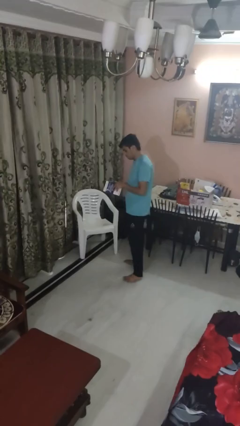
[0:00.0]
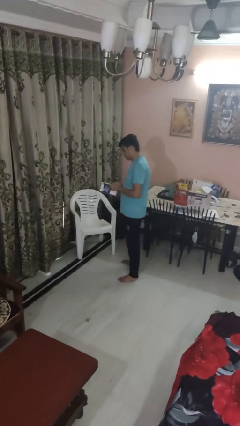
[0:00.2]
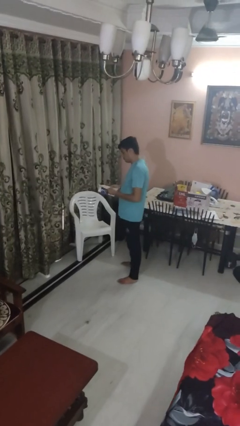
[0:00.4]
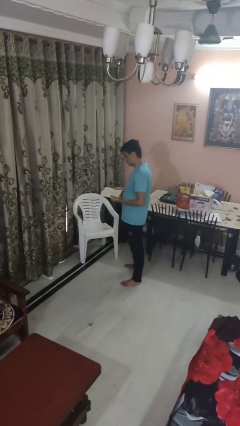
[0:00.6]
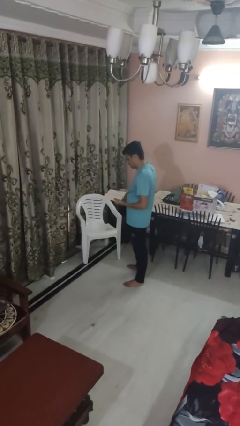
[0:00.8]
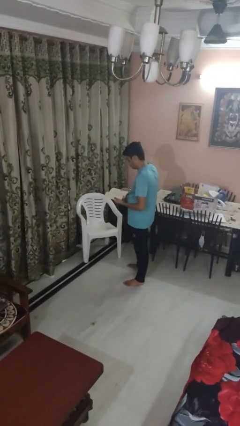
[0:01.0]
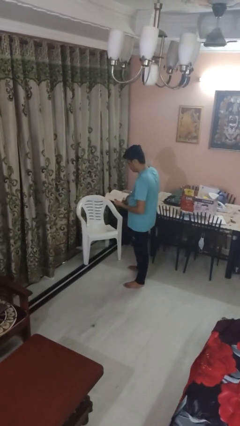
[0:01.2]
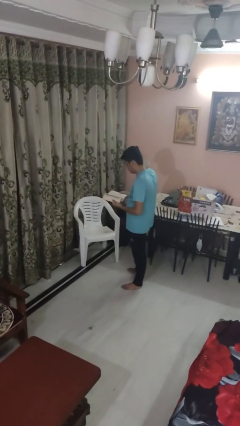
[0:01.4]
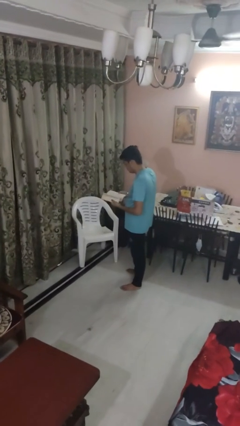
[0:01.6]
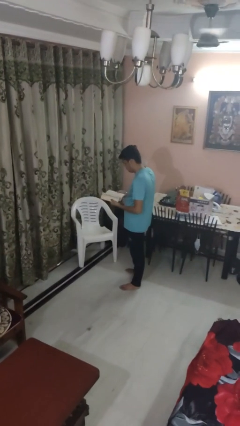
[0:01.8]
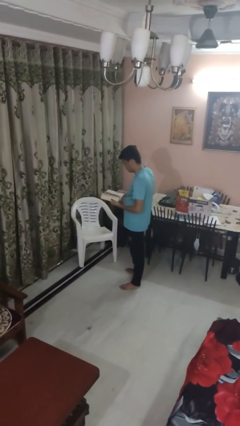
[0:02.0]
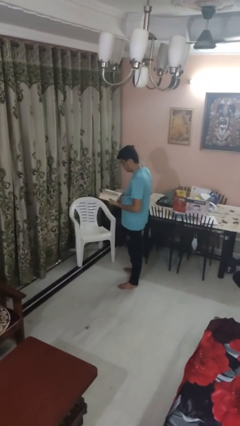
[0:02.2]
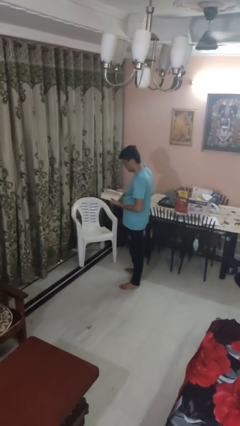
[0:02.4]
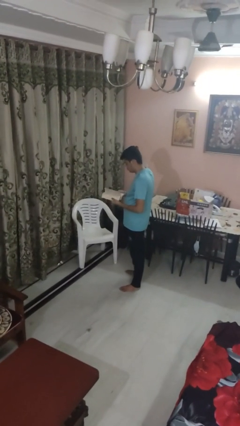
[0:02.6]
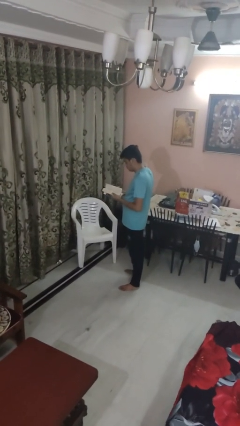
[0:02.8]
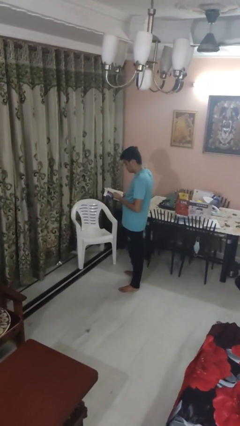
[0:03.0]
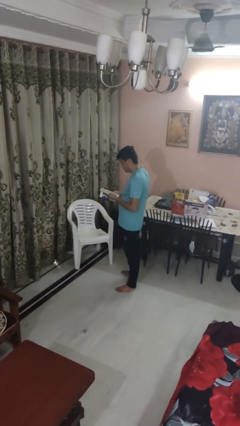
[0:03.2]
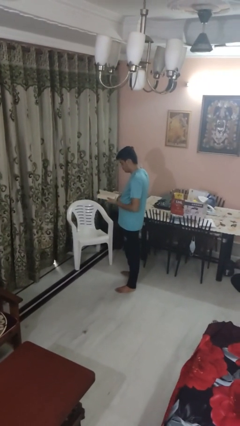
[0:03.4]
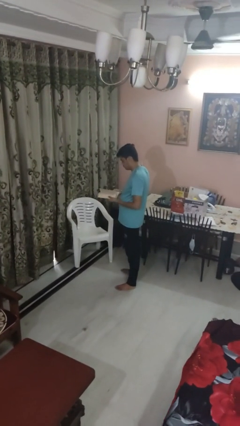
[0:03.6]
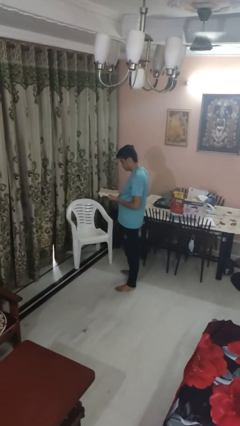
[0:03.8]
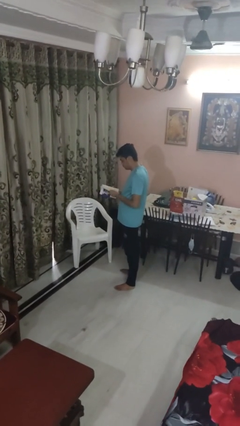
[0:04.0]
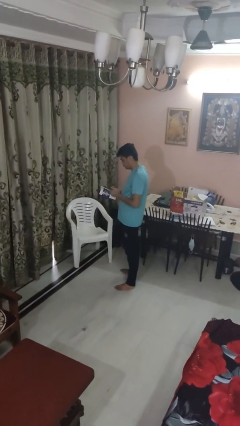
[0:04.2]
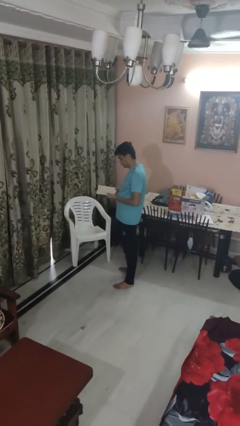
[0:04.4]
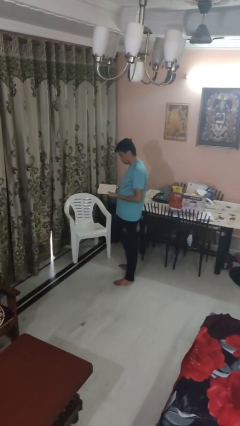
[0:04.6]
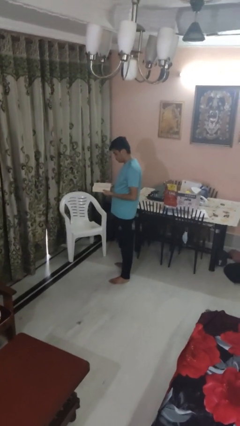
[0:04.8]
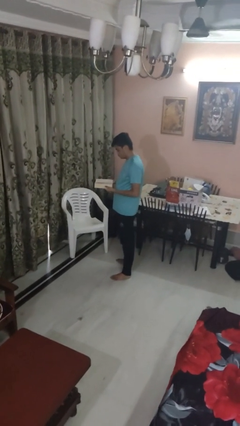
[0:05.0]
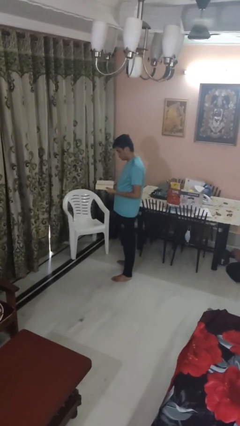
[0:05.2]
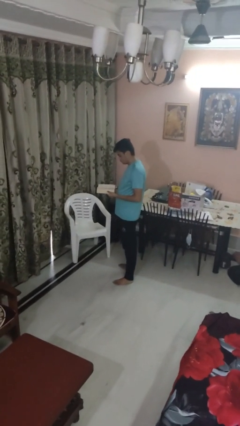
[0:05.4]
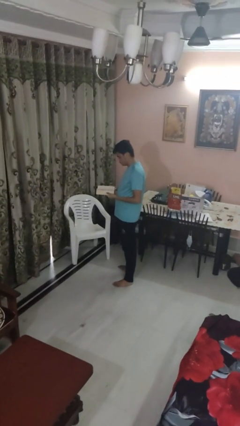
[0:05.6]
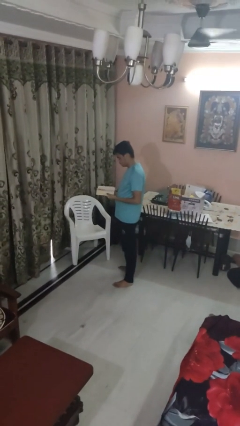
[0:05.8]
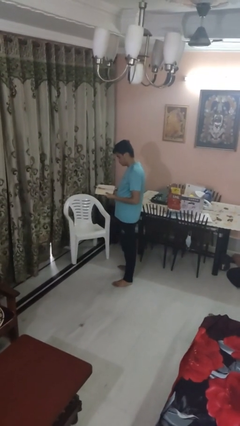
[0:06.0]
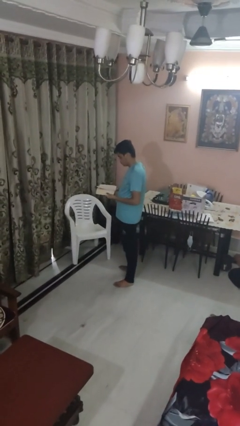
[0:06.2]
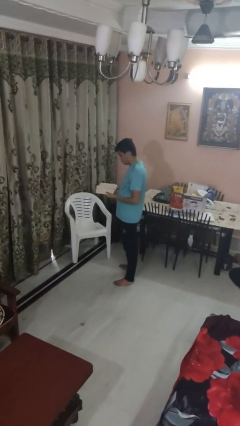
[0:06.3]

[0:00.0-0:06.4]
person reads book

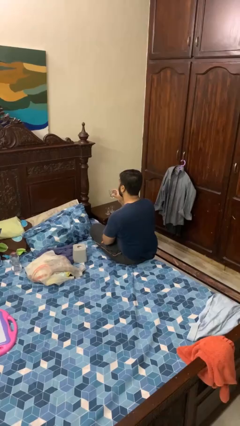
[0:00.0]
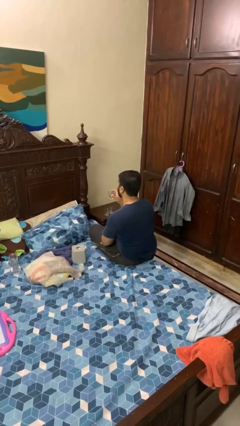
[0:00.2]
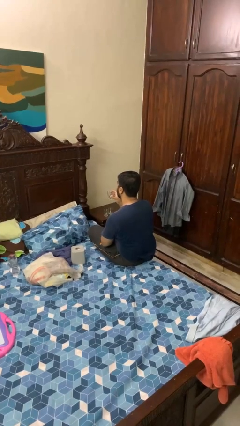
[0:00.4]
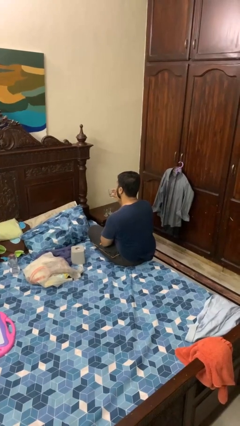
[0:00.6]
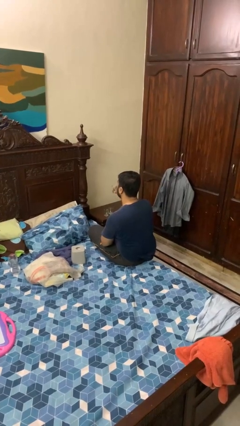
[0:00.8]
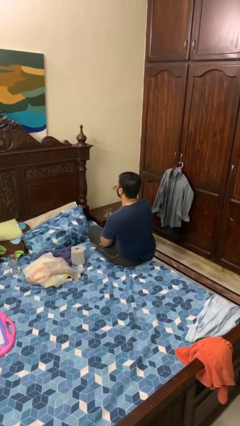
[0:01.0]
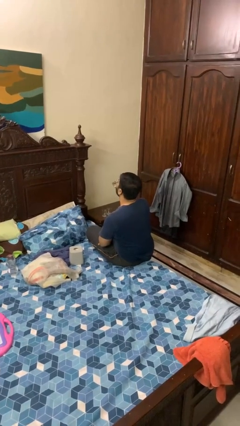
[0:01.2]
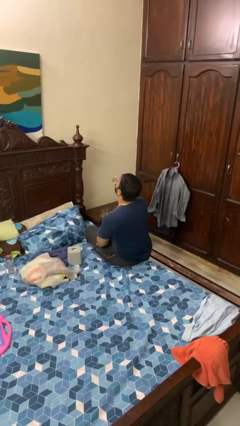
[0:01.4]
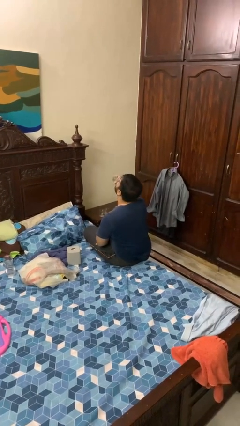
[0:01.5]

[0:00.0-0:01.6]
person drinks from shotglass

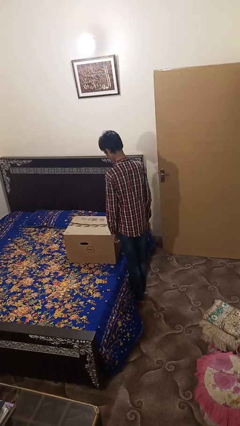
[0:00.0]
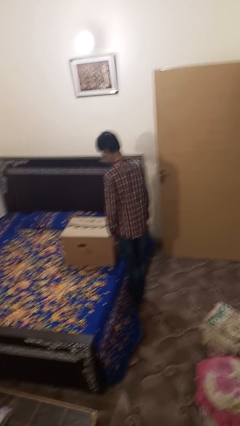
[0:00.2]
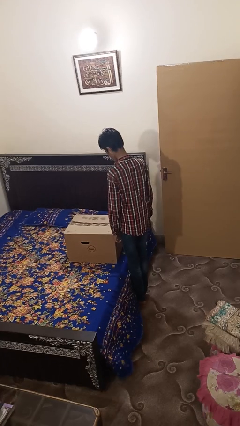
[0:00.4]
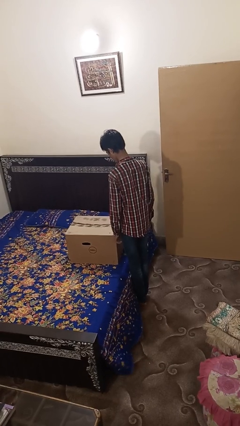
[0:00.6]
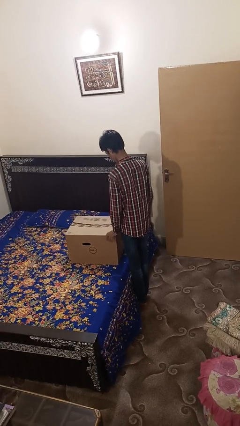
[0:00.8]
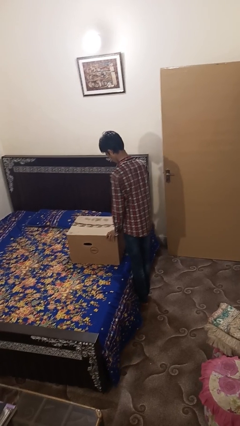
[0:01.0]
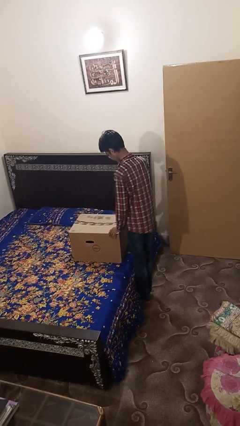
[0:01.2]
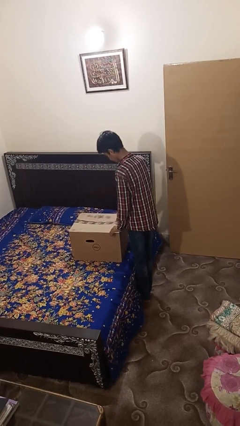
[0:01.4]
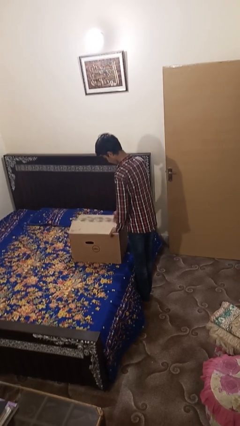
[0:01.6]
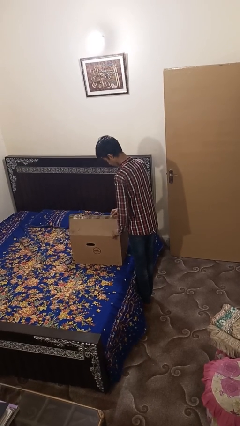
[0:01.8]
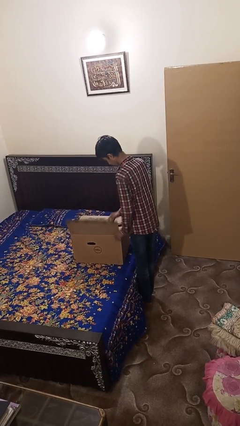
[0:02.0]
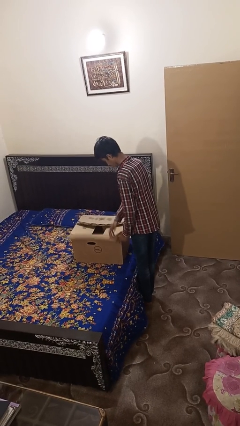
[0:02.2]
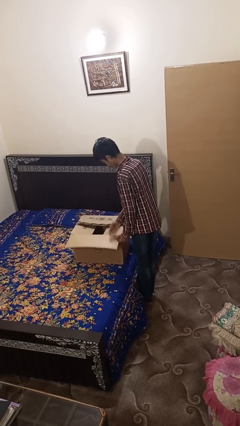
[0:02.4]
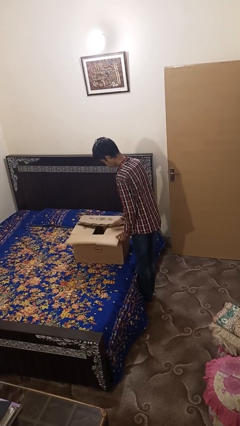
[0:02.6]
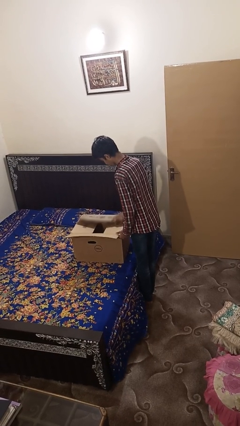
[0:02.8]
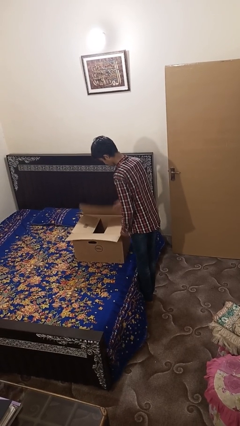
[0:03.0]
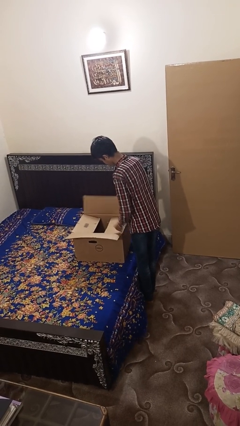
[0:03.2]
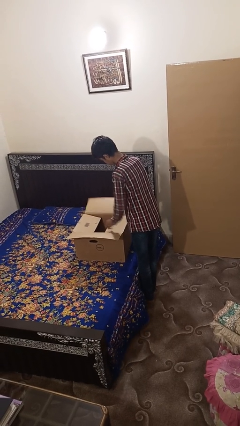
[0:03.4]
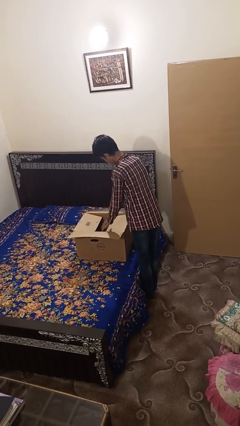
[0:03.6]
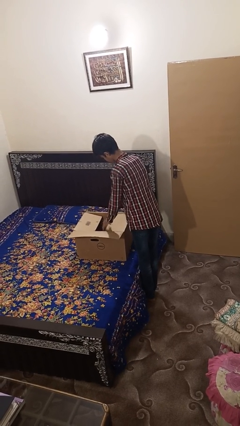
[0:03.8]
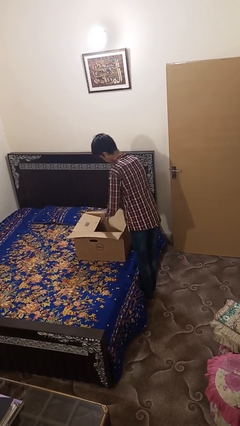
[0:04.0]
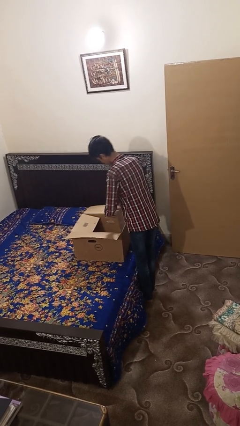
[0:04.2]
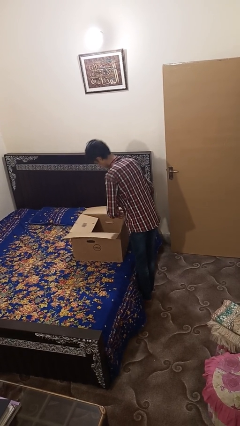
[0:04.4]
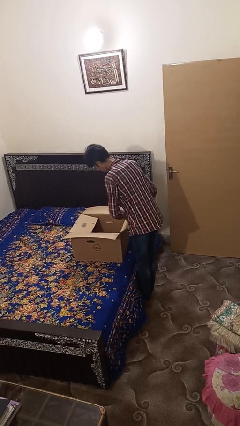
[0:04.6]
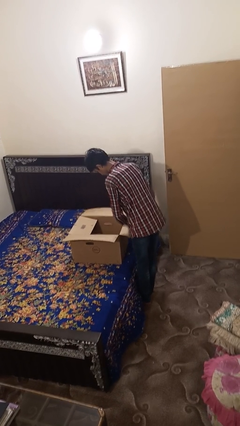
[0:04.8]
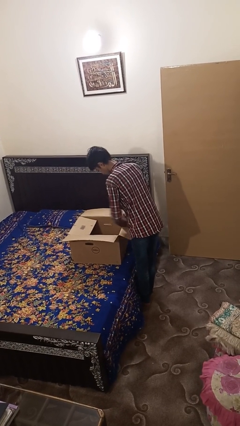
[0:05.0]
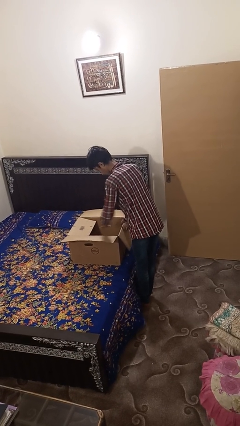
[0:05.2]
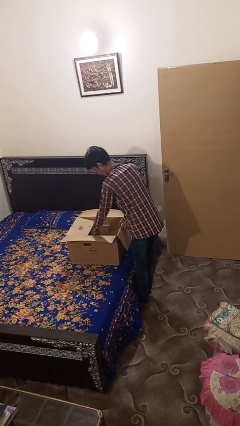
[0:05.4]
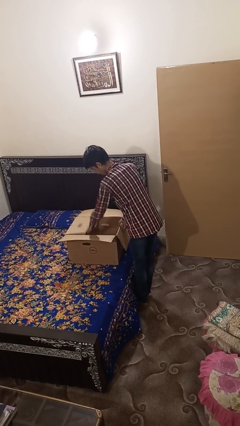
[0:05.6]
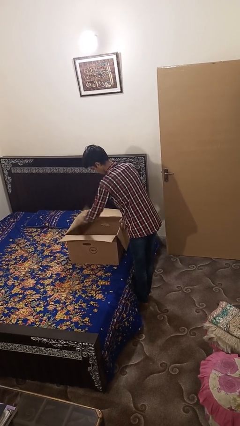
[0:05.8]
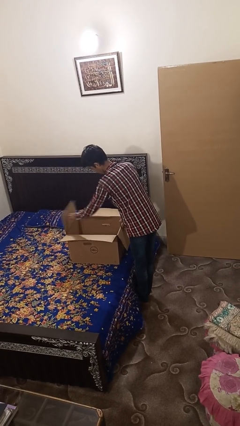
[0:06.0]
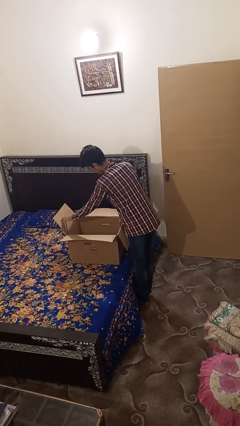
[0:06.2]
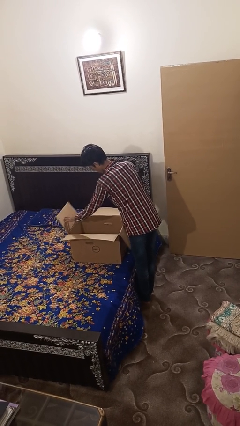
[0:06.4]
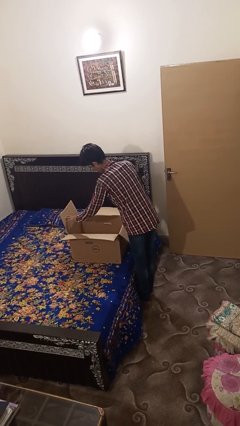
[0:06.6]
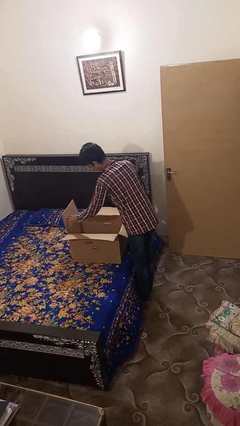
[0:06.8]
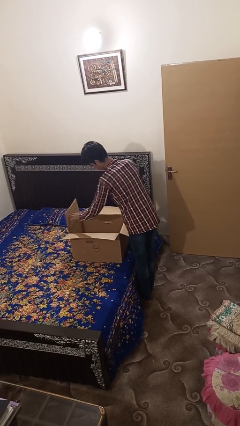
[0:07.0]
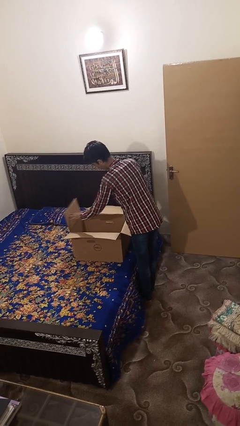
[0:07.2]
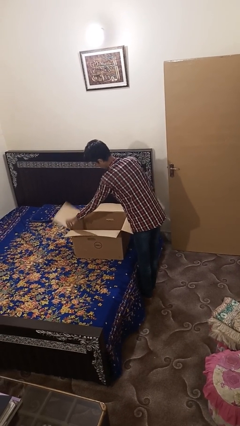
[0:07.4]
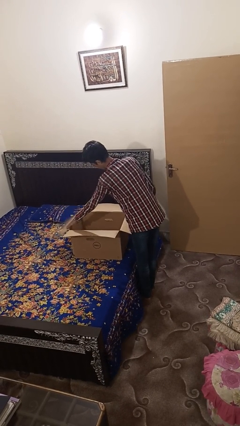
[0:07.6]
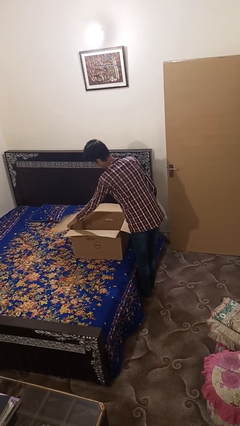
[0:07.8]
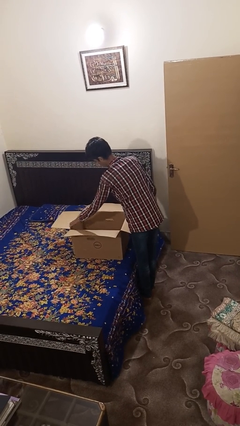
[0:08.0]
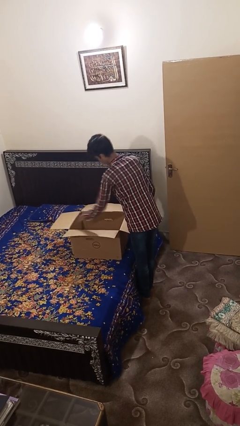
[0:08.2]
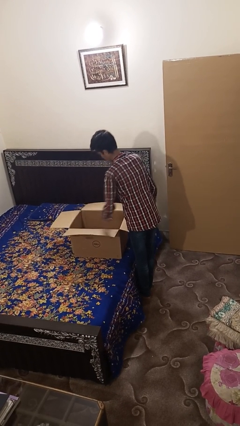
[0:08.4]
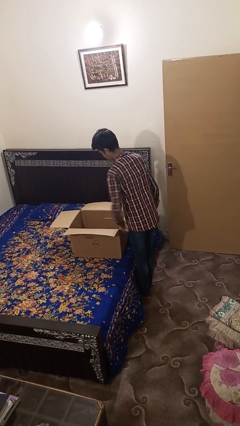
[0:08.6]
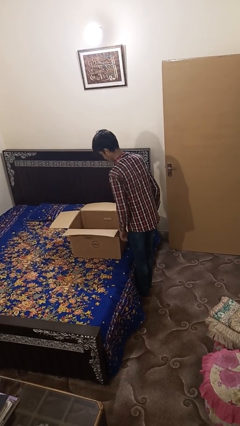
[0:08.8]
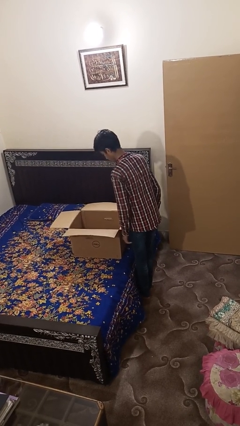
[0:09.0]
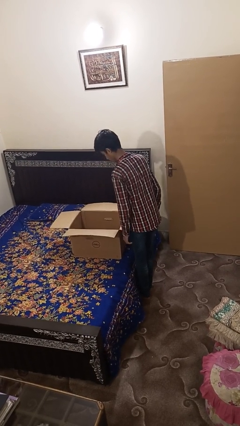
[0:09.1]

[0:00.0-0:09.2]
person opens box

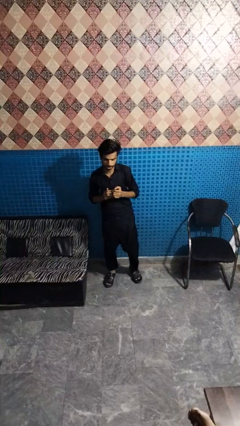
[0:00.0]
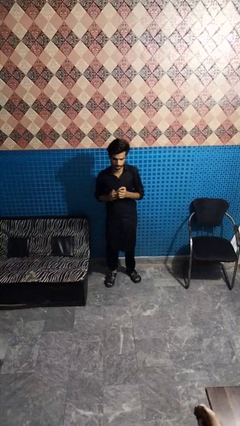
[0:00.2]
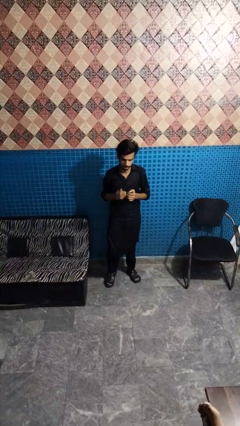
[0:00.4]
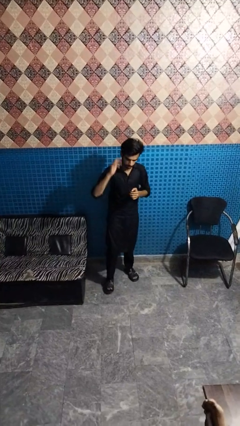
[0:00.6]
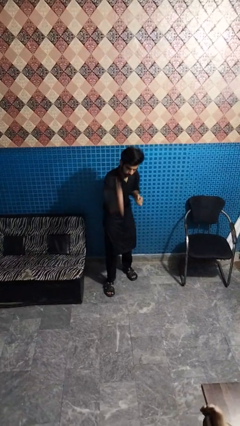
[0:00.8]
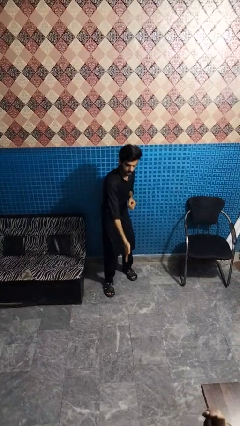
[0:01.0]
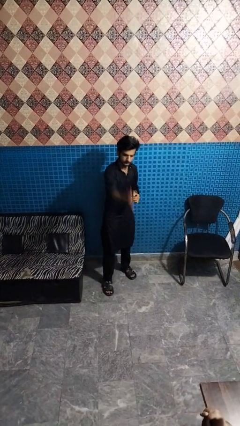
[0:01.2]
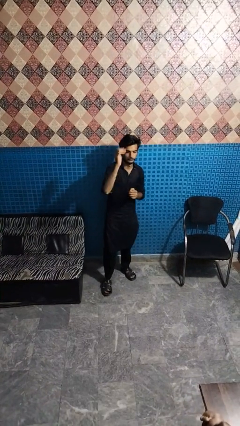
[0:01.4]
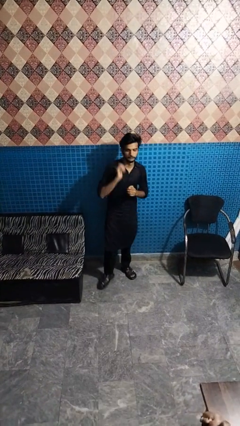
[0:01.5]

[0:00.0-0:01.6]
person karate chop
